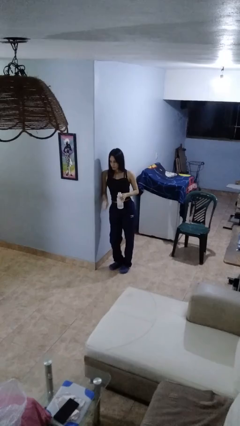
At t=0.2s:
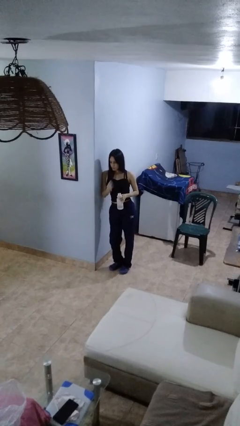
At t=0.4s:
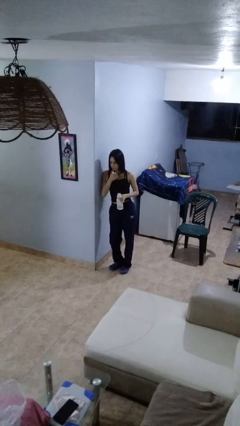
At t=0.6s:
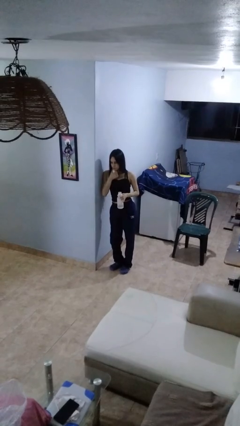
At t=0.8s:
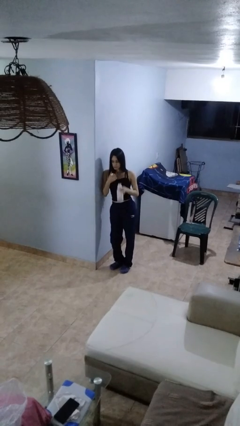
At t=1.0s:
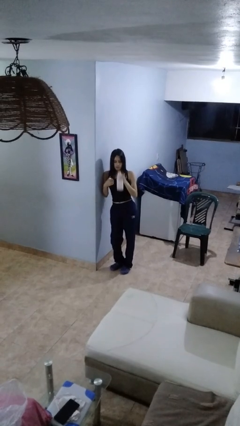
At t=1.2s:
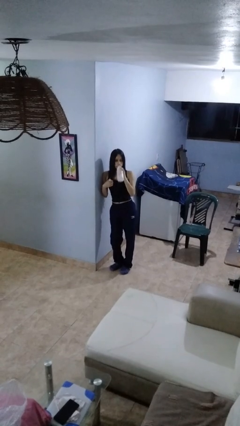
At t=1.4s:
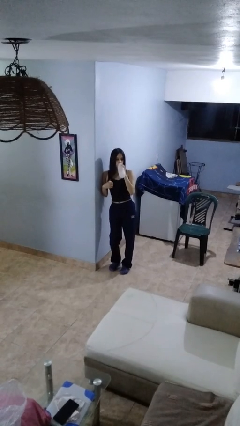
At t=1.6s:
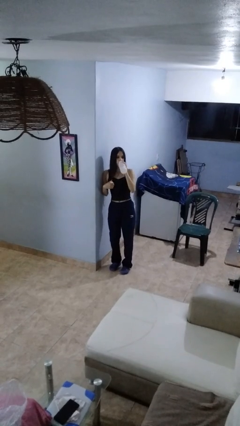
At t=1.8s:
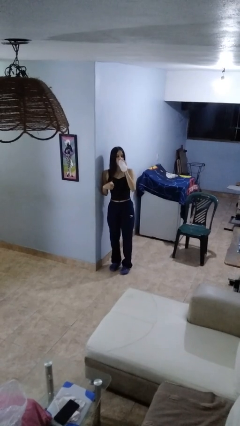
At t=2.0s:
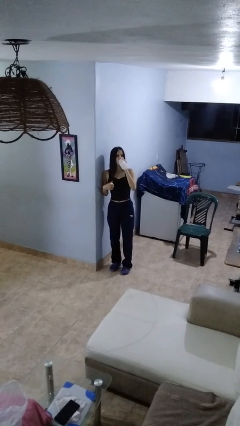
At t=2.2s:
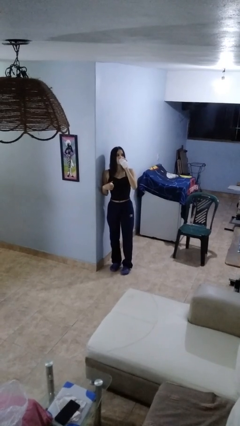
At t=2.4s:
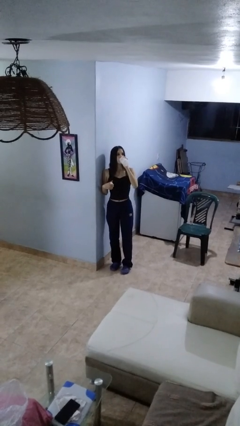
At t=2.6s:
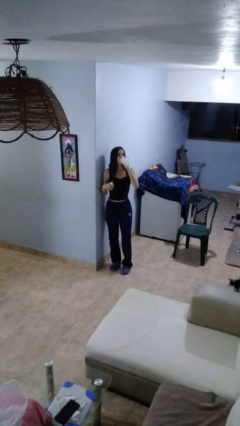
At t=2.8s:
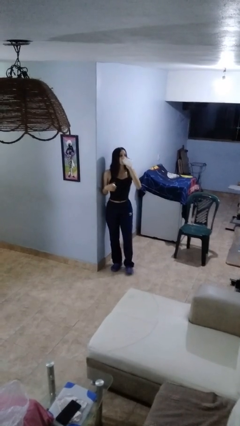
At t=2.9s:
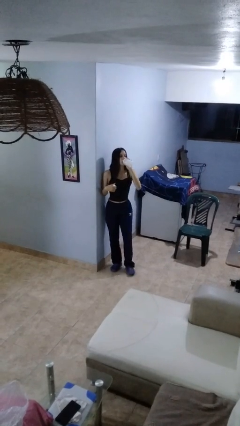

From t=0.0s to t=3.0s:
person drinks from bottle

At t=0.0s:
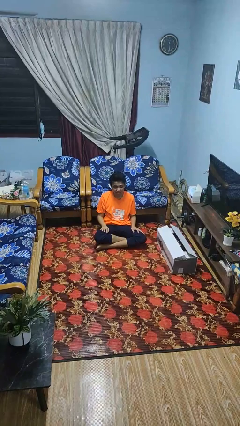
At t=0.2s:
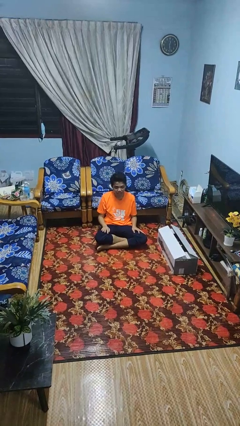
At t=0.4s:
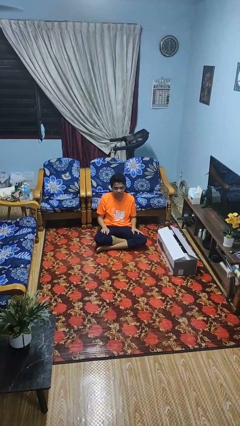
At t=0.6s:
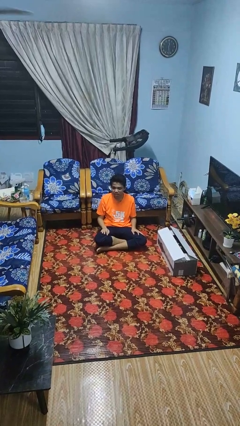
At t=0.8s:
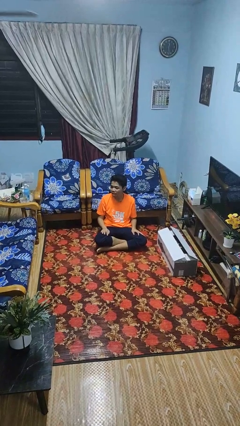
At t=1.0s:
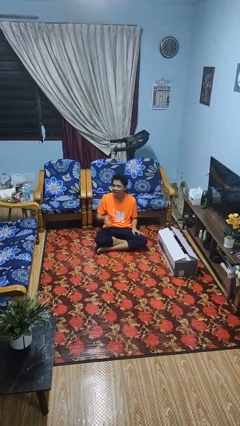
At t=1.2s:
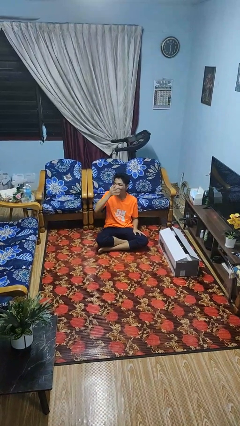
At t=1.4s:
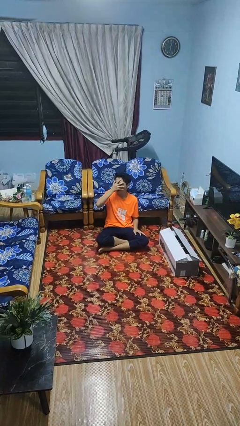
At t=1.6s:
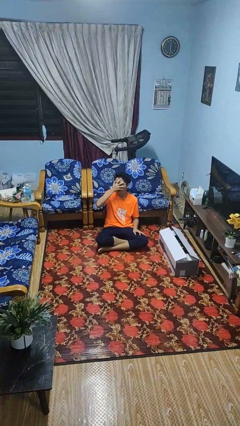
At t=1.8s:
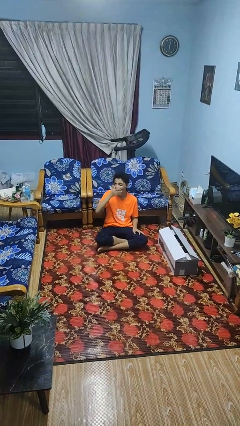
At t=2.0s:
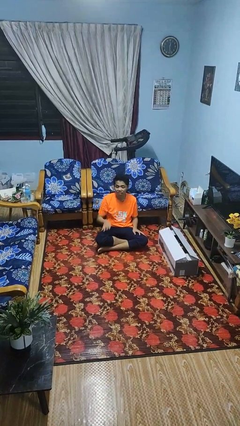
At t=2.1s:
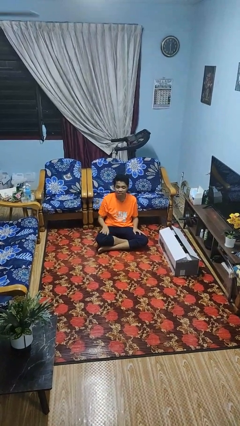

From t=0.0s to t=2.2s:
person covers face with hands

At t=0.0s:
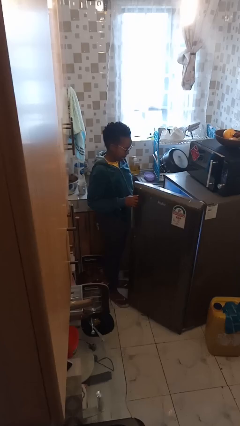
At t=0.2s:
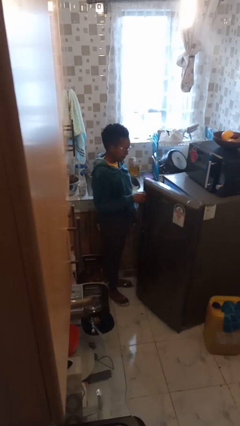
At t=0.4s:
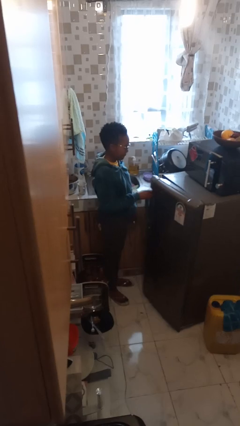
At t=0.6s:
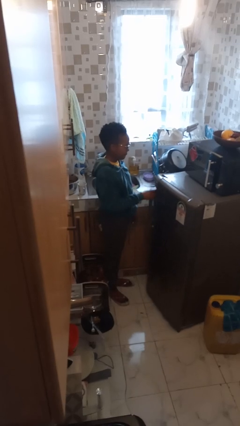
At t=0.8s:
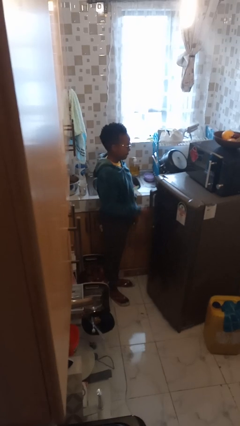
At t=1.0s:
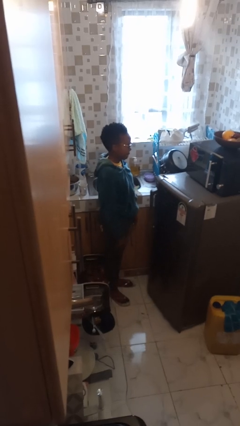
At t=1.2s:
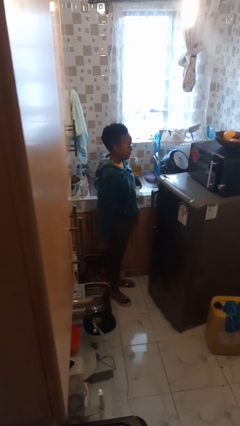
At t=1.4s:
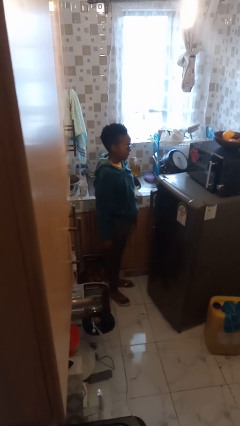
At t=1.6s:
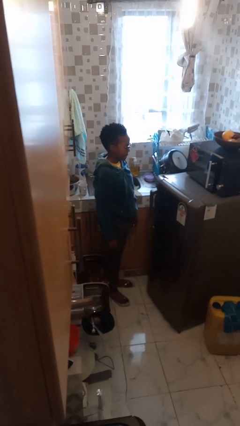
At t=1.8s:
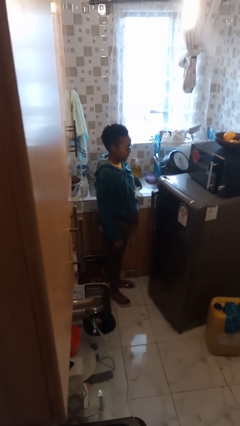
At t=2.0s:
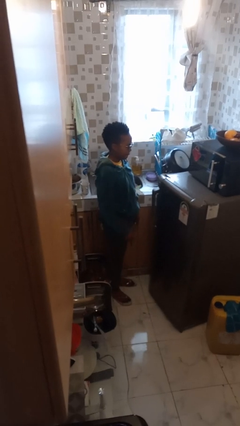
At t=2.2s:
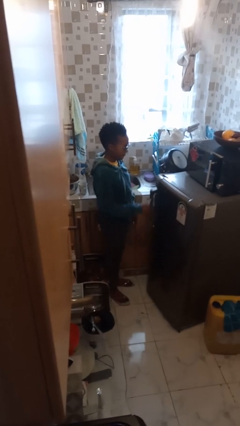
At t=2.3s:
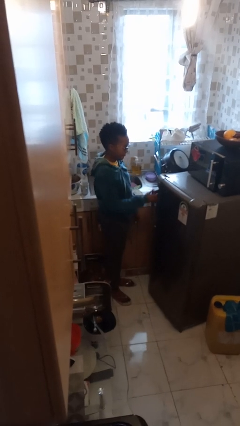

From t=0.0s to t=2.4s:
person closes refrigerator

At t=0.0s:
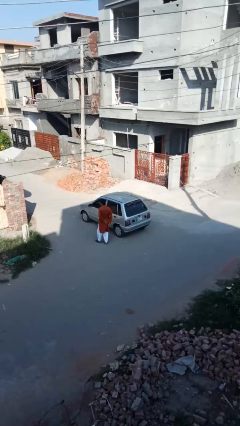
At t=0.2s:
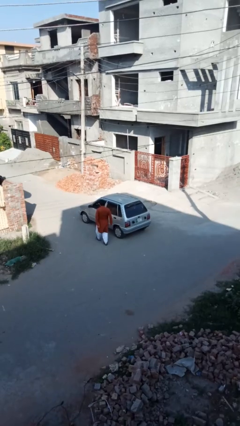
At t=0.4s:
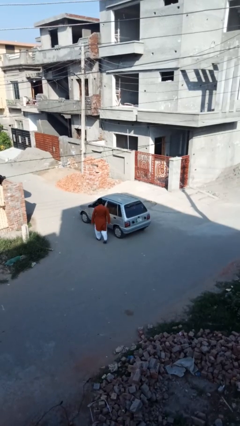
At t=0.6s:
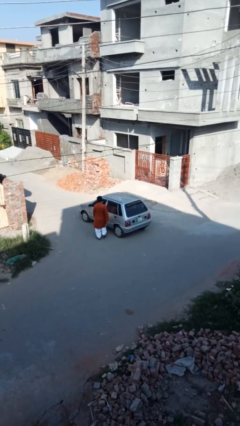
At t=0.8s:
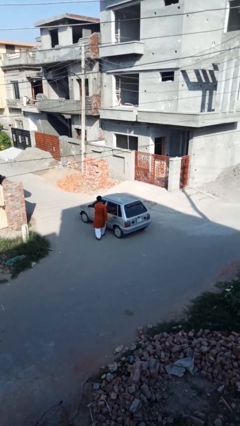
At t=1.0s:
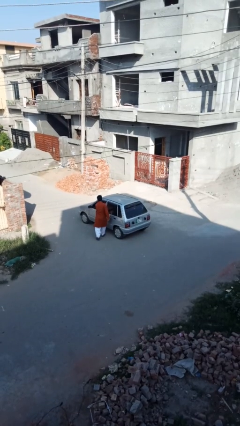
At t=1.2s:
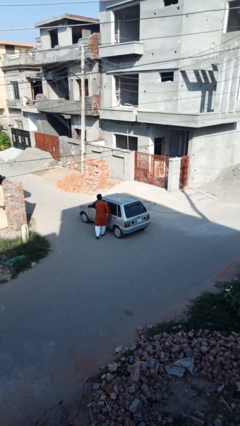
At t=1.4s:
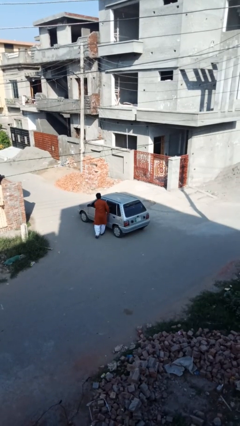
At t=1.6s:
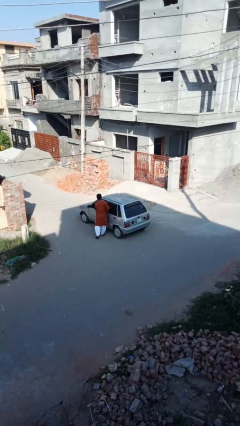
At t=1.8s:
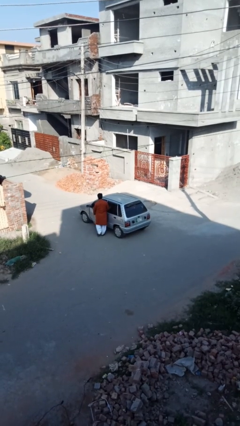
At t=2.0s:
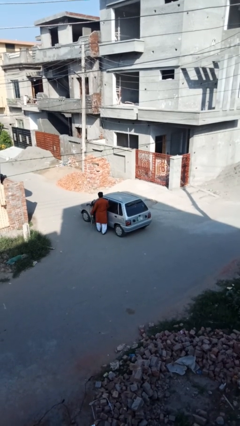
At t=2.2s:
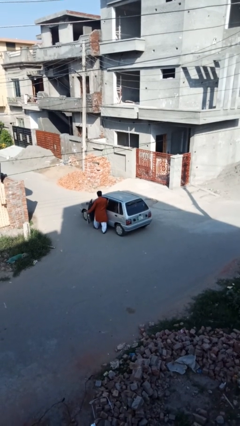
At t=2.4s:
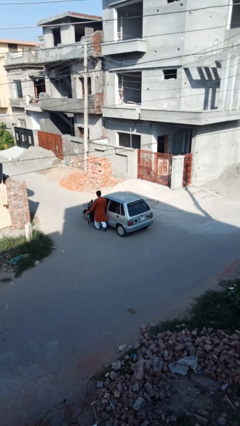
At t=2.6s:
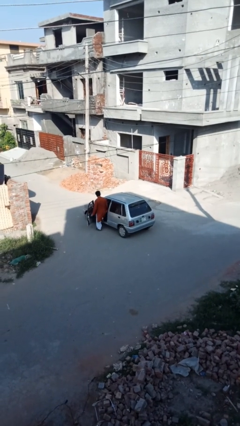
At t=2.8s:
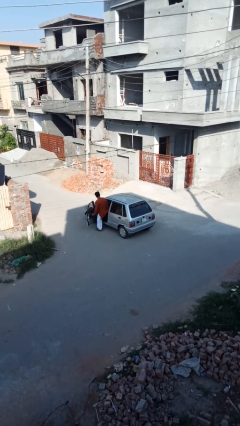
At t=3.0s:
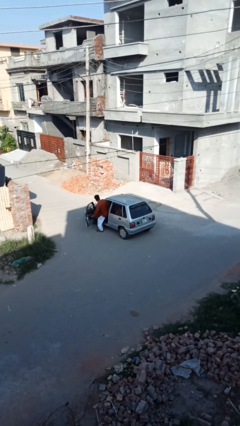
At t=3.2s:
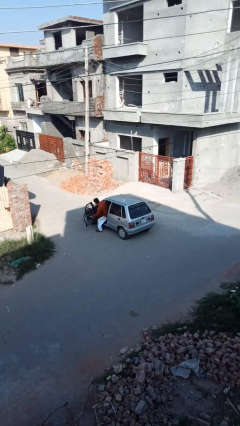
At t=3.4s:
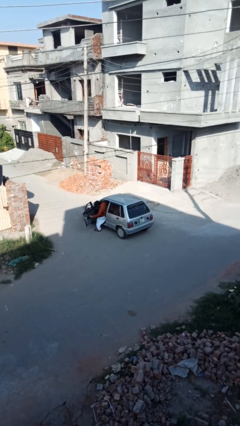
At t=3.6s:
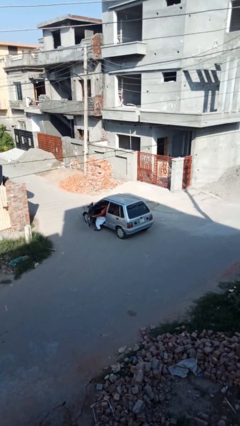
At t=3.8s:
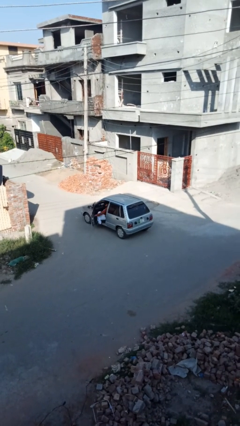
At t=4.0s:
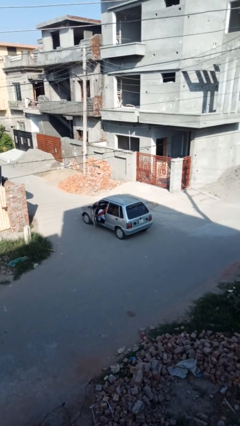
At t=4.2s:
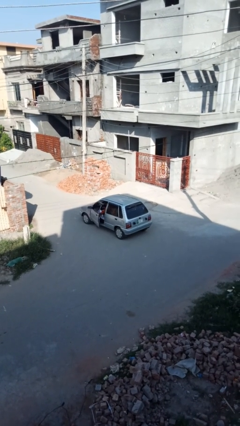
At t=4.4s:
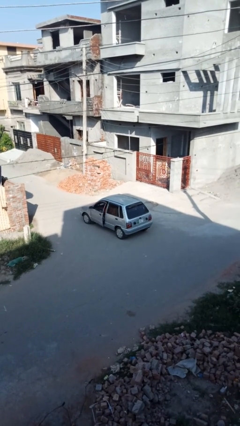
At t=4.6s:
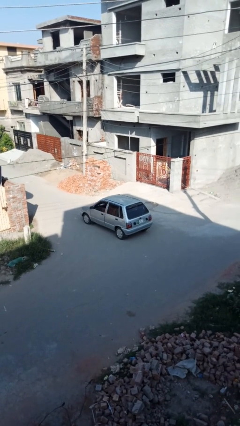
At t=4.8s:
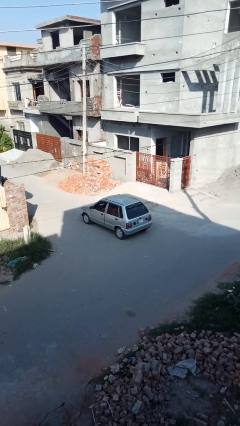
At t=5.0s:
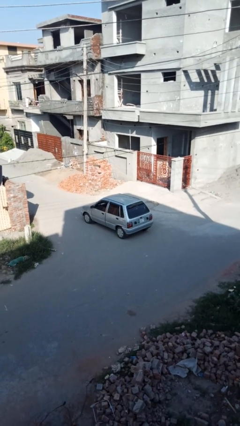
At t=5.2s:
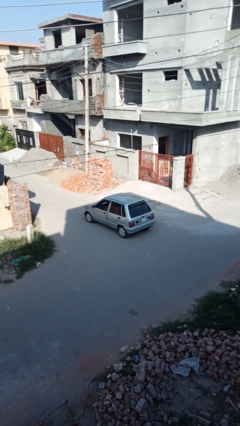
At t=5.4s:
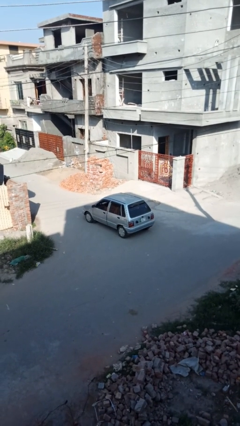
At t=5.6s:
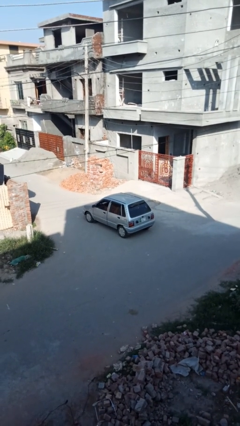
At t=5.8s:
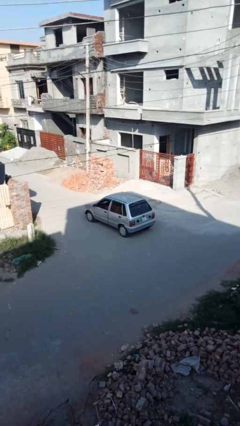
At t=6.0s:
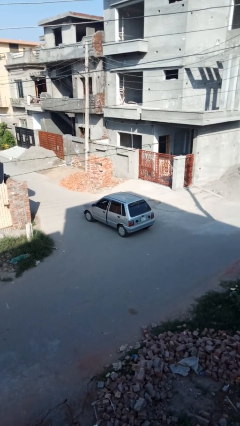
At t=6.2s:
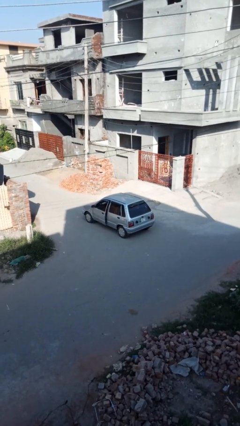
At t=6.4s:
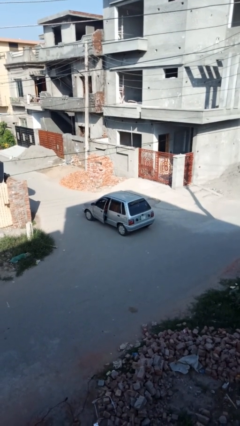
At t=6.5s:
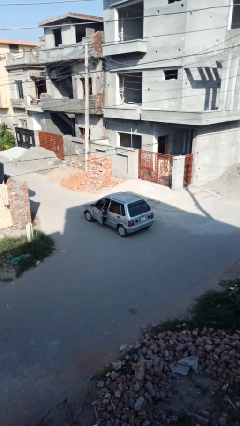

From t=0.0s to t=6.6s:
car picks up person

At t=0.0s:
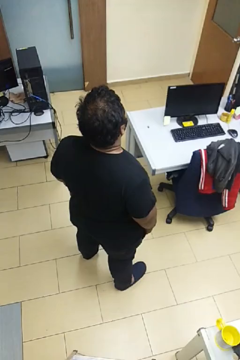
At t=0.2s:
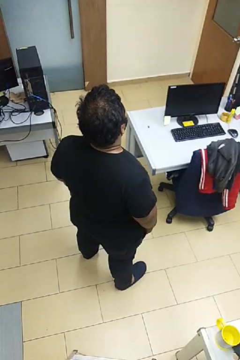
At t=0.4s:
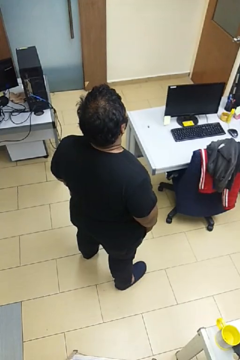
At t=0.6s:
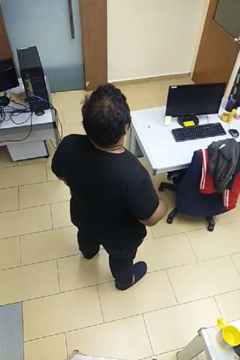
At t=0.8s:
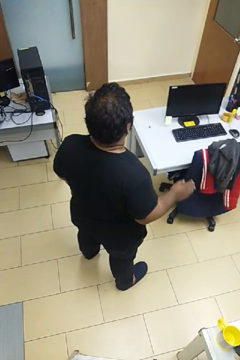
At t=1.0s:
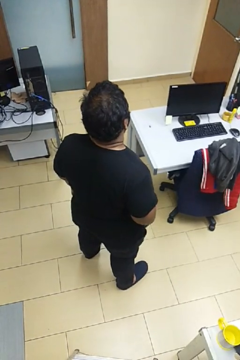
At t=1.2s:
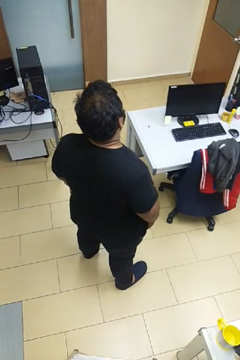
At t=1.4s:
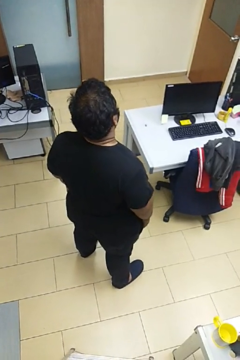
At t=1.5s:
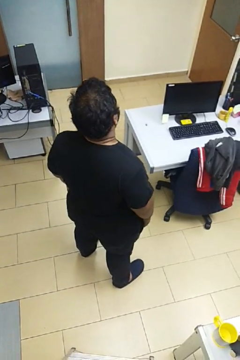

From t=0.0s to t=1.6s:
person slaps hands on thighs

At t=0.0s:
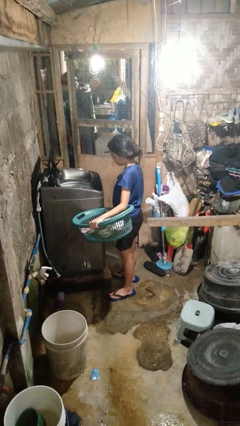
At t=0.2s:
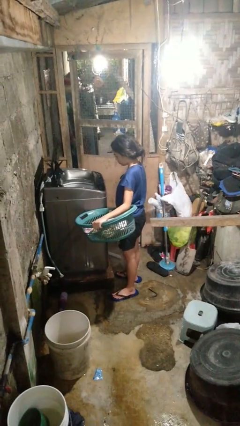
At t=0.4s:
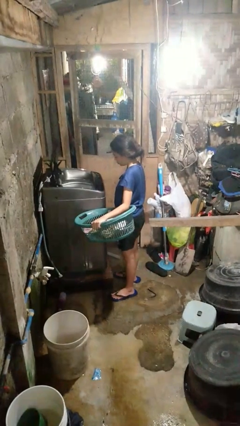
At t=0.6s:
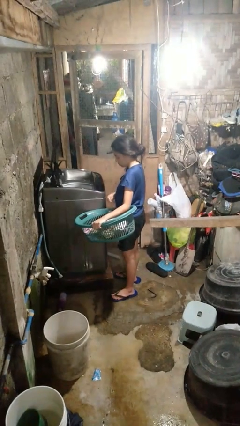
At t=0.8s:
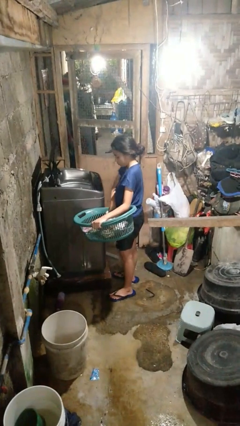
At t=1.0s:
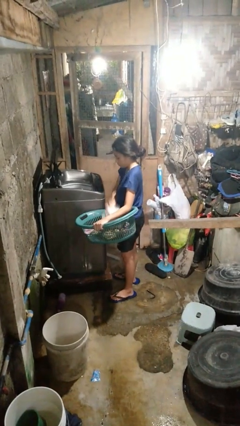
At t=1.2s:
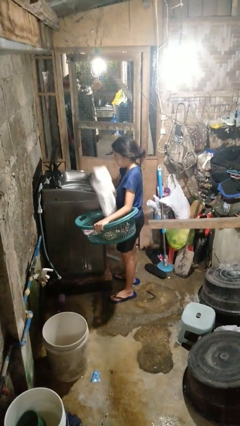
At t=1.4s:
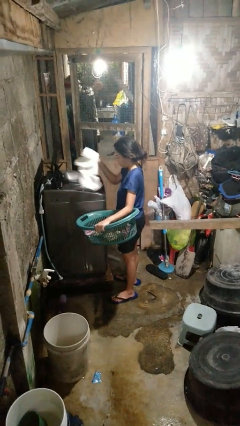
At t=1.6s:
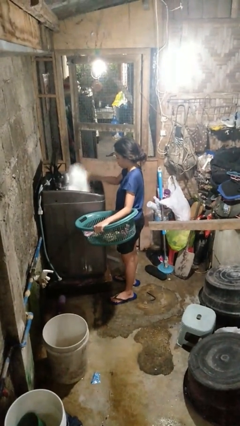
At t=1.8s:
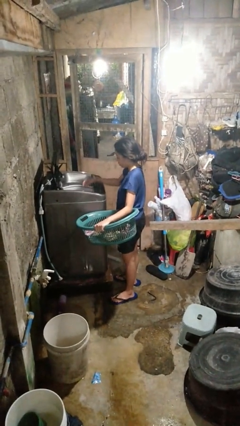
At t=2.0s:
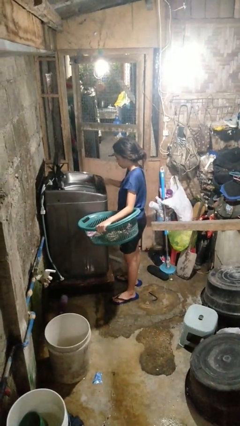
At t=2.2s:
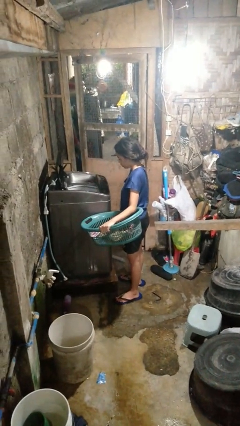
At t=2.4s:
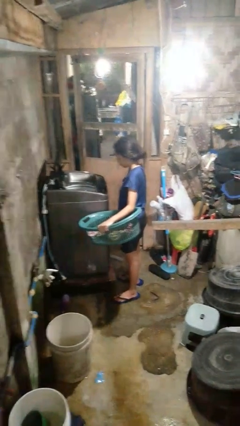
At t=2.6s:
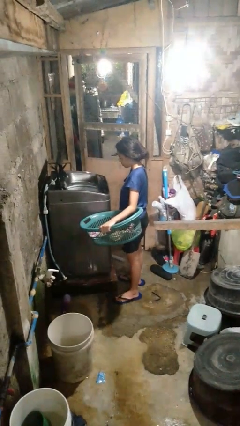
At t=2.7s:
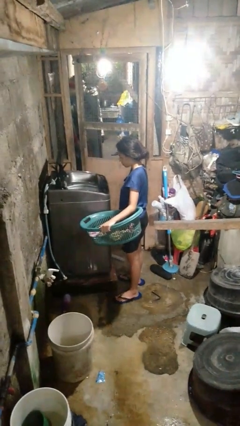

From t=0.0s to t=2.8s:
person loads clotheswasher
